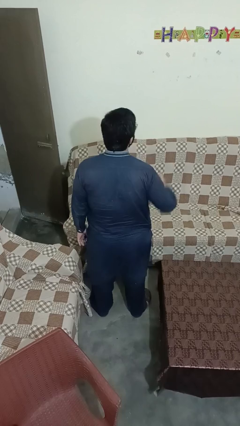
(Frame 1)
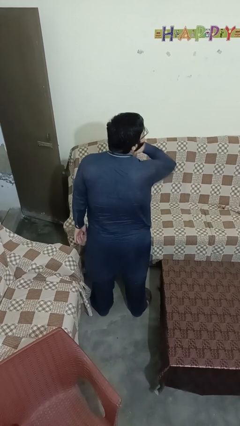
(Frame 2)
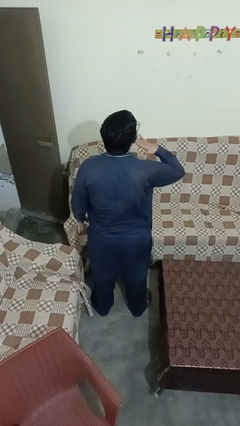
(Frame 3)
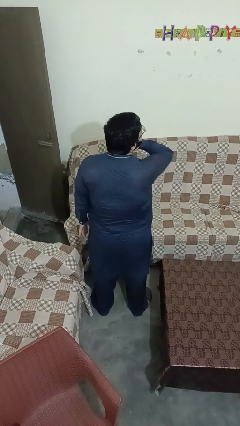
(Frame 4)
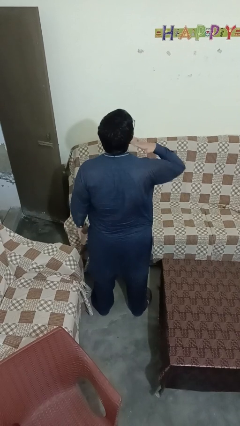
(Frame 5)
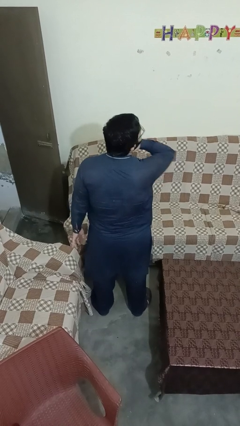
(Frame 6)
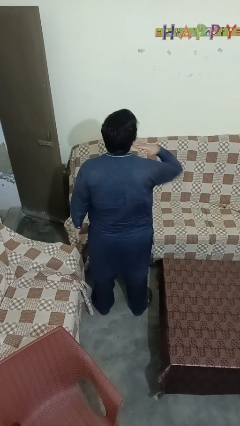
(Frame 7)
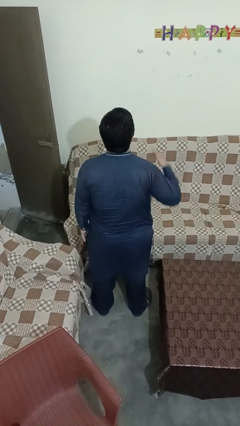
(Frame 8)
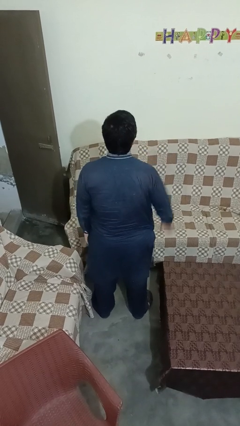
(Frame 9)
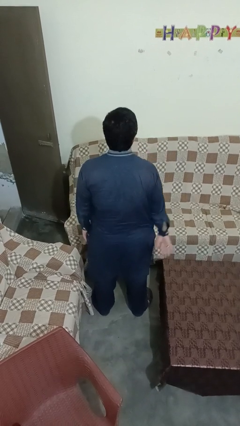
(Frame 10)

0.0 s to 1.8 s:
person gestures cut

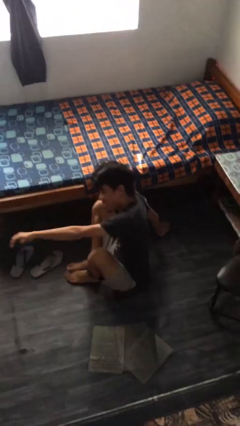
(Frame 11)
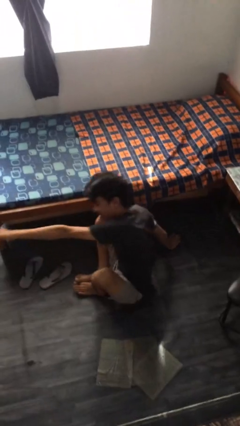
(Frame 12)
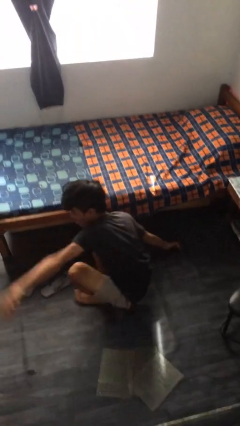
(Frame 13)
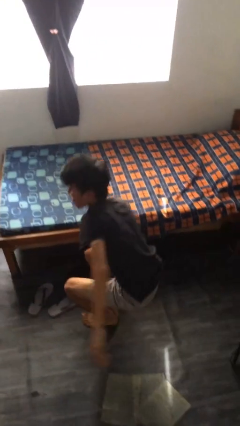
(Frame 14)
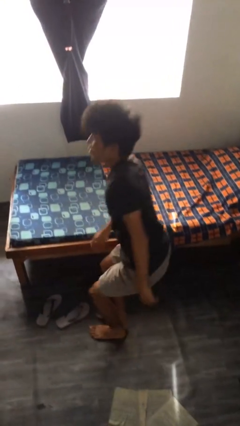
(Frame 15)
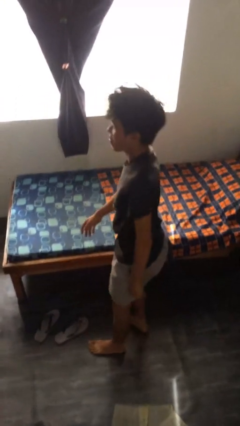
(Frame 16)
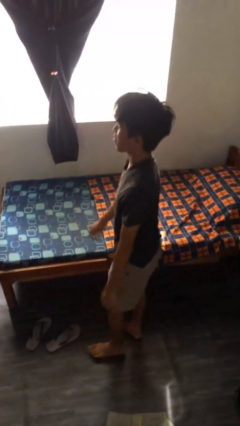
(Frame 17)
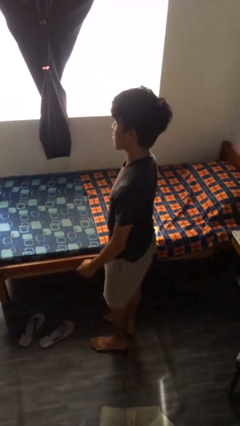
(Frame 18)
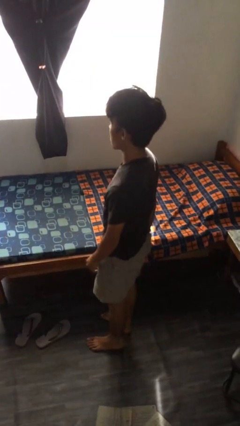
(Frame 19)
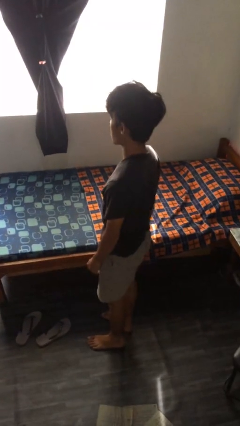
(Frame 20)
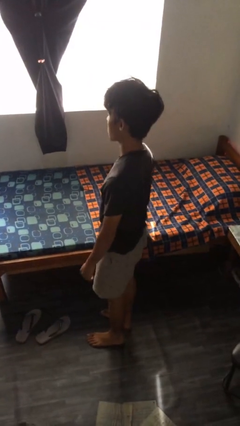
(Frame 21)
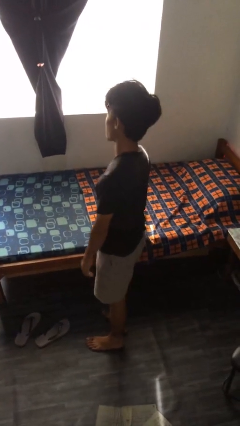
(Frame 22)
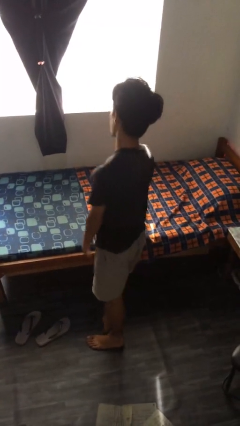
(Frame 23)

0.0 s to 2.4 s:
person stands up from floor

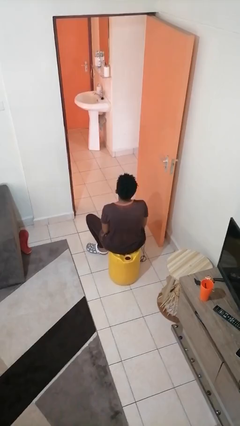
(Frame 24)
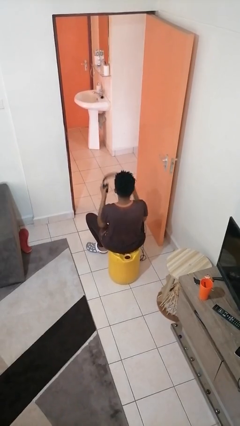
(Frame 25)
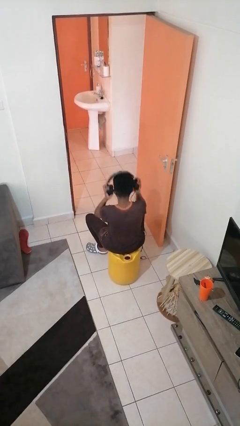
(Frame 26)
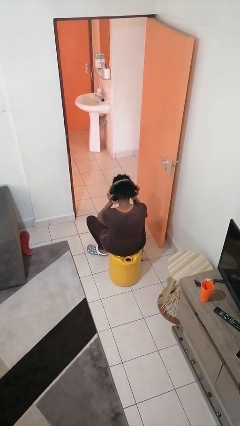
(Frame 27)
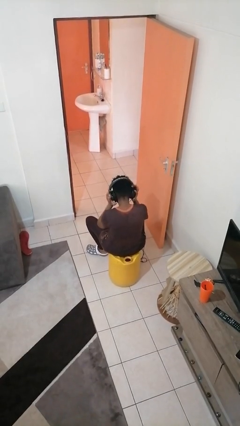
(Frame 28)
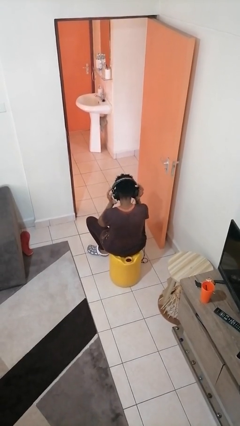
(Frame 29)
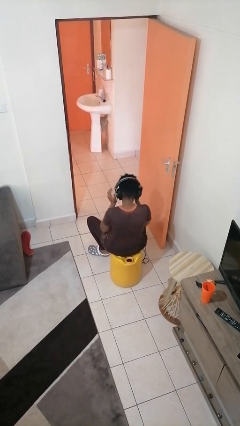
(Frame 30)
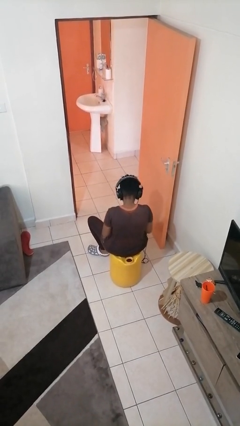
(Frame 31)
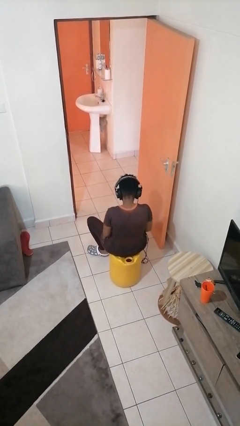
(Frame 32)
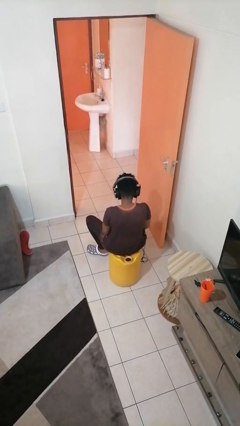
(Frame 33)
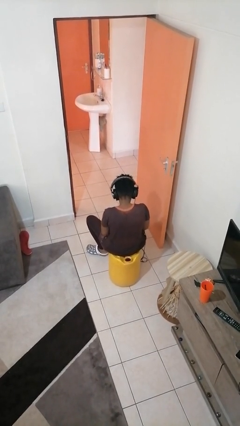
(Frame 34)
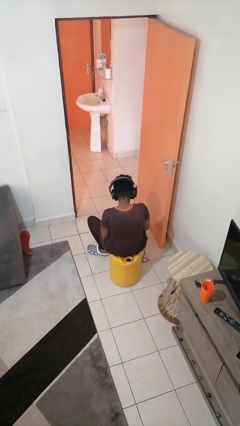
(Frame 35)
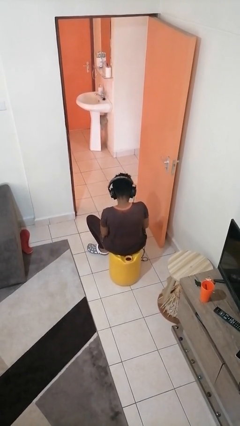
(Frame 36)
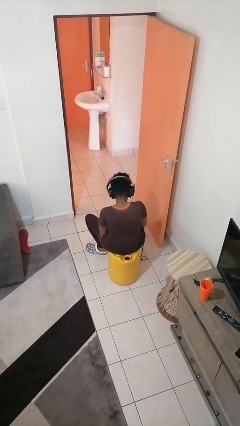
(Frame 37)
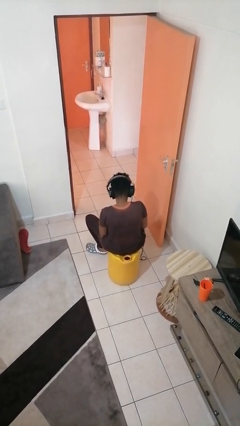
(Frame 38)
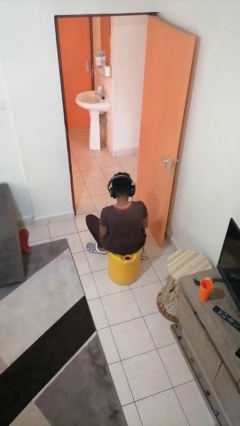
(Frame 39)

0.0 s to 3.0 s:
person puts on headphones

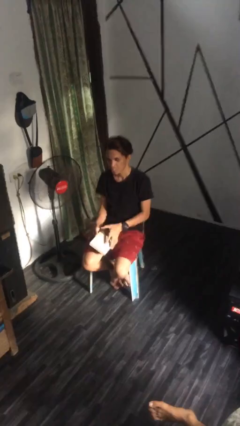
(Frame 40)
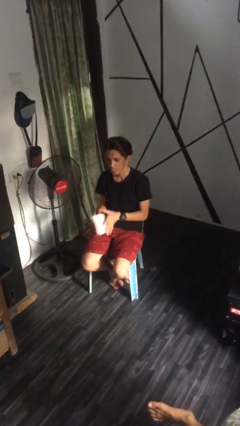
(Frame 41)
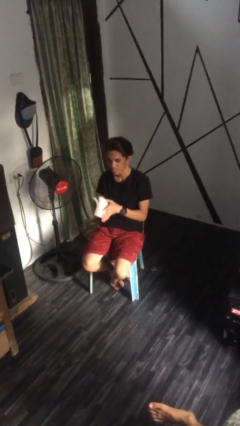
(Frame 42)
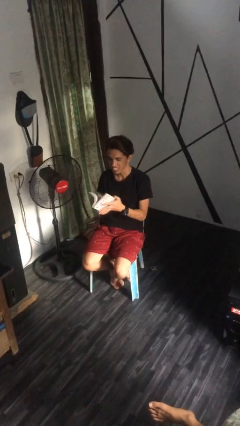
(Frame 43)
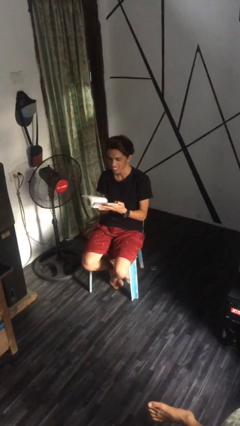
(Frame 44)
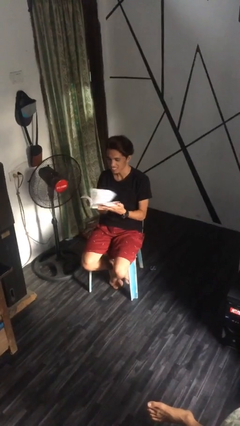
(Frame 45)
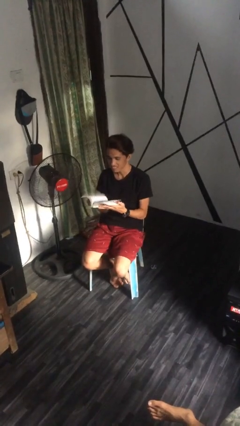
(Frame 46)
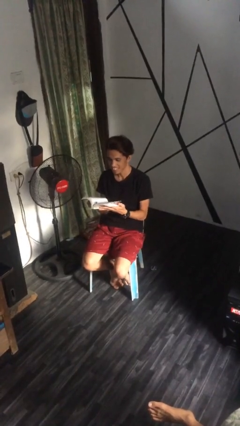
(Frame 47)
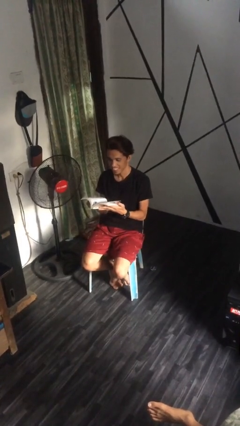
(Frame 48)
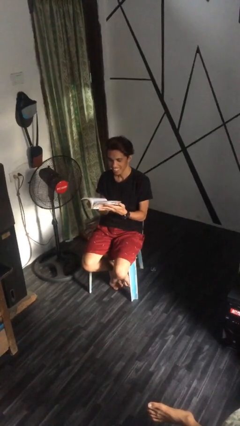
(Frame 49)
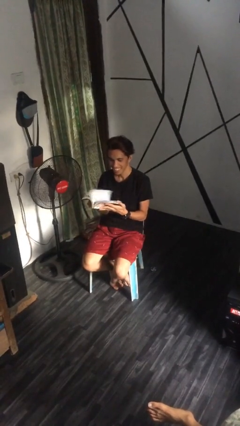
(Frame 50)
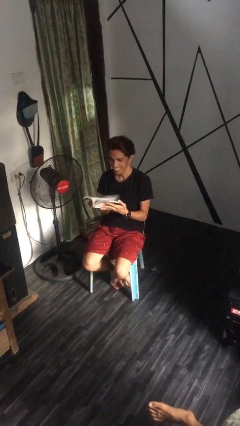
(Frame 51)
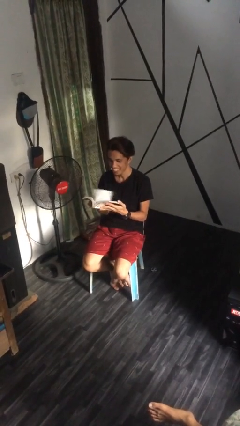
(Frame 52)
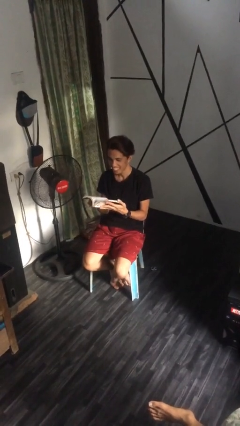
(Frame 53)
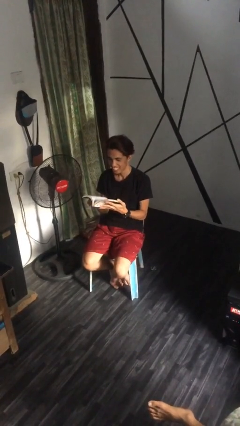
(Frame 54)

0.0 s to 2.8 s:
person reads document

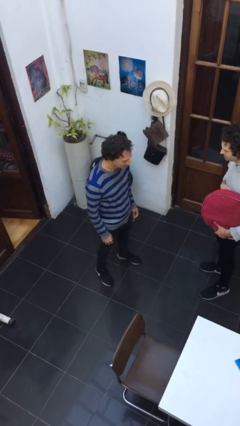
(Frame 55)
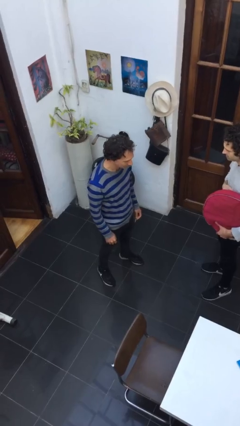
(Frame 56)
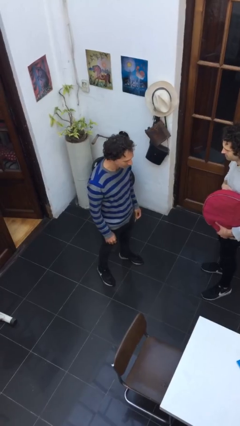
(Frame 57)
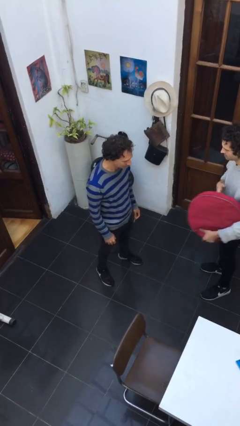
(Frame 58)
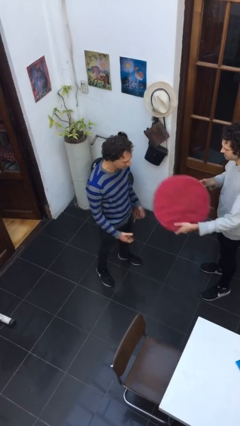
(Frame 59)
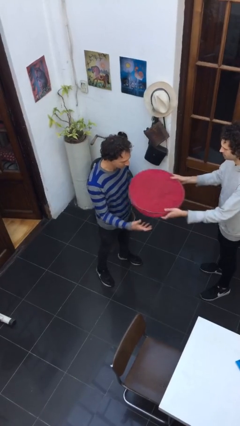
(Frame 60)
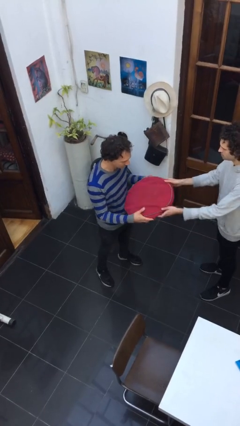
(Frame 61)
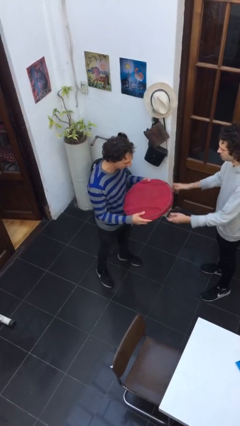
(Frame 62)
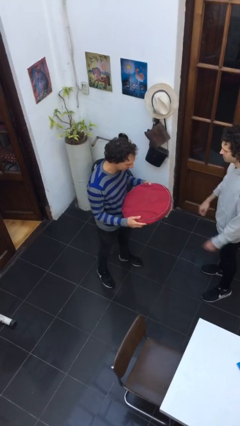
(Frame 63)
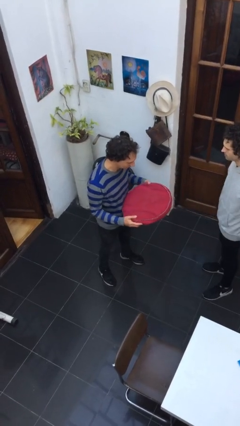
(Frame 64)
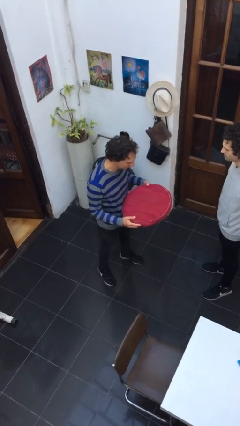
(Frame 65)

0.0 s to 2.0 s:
person transfers object to person

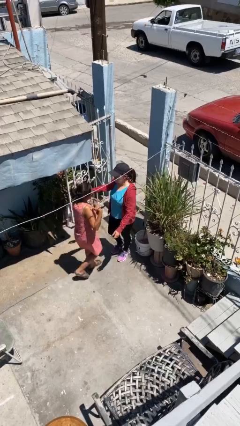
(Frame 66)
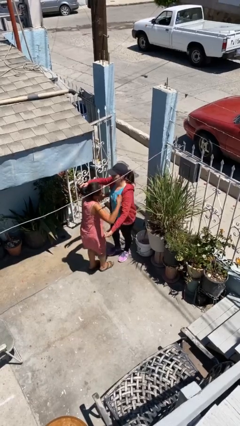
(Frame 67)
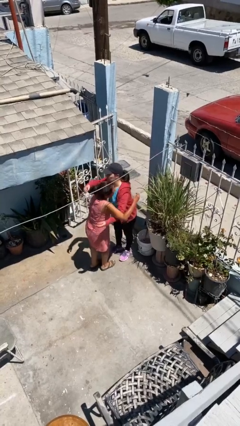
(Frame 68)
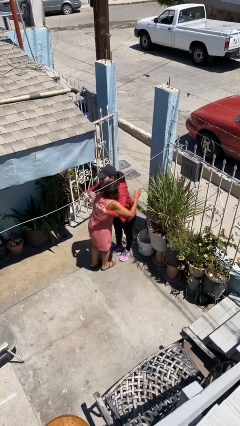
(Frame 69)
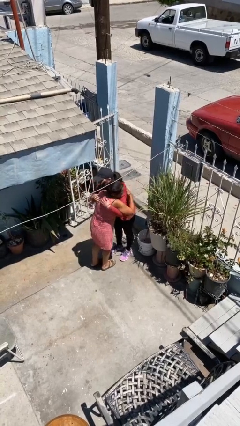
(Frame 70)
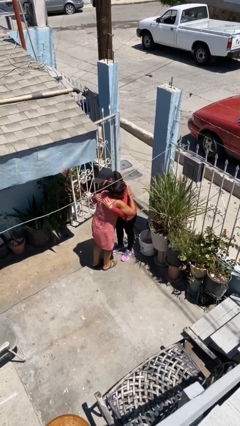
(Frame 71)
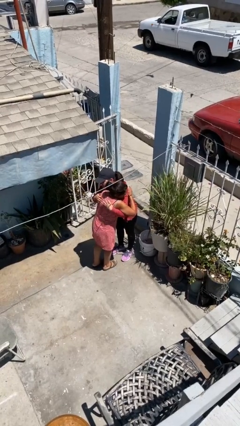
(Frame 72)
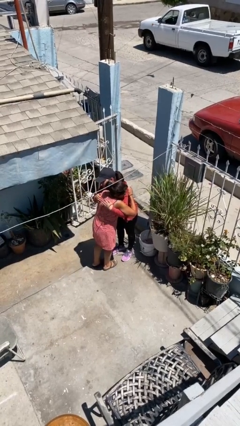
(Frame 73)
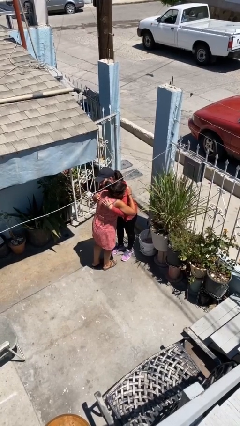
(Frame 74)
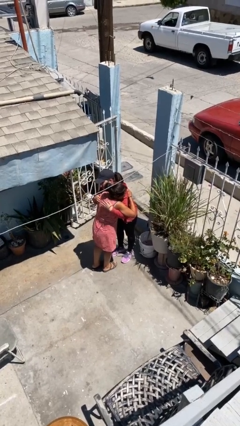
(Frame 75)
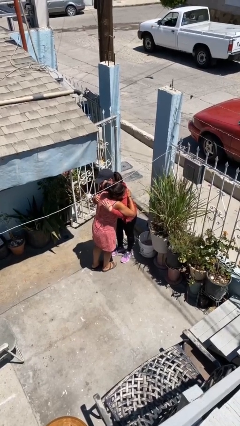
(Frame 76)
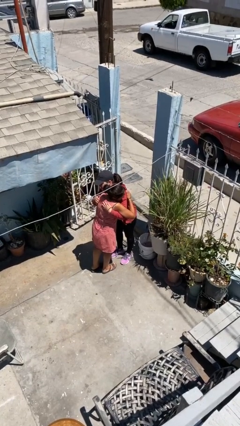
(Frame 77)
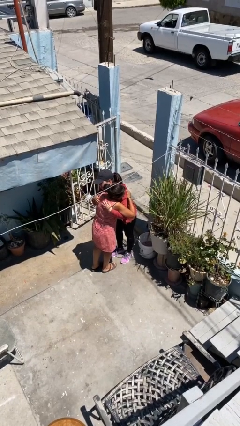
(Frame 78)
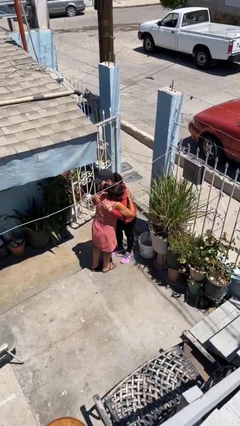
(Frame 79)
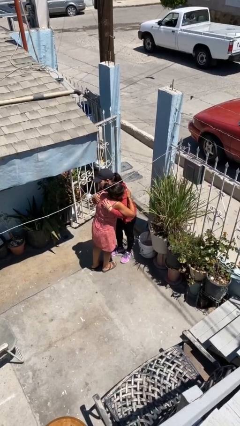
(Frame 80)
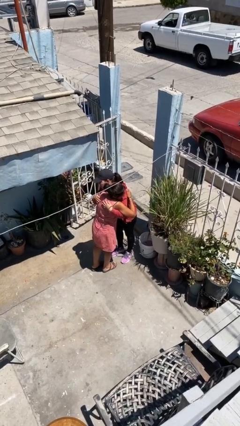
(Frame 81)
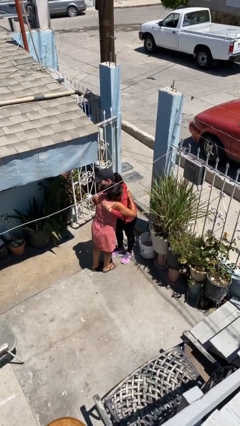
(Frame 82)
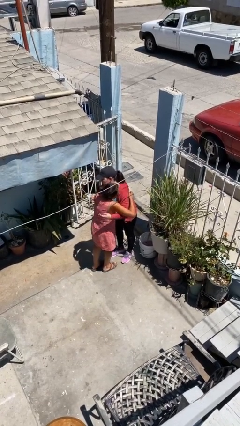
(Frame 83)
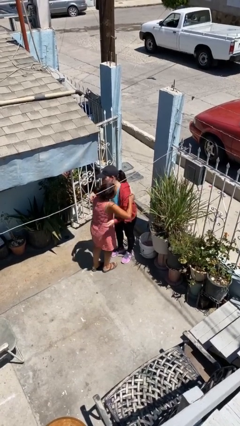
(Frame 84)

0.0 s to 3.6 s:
person embraces person

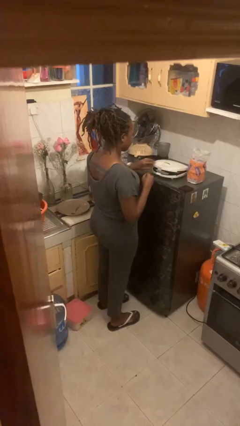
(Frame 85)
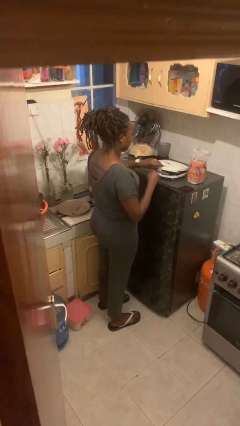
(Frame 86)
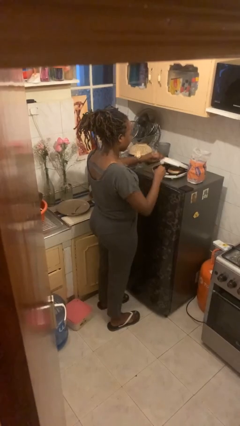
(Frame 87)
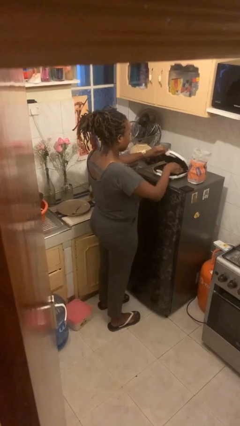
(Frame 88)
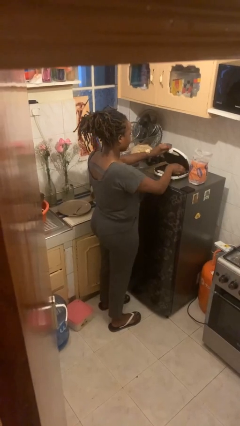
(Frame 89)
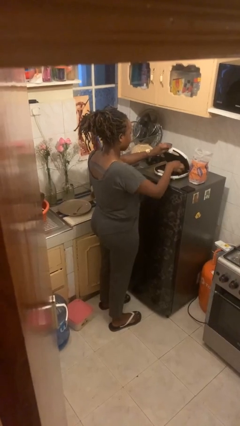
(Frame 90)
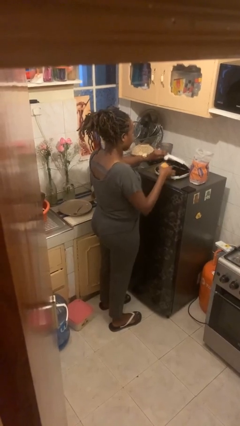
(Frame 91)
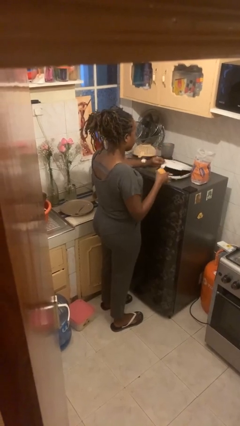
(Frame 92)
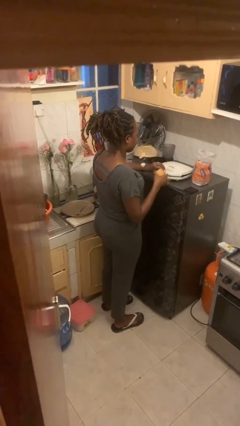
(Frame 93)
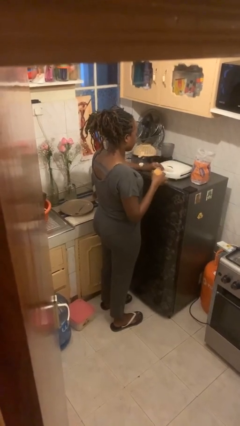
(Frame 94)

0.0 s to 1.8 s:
person takes object from toaster
